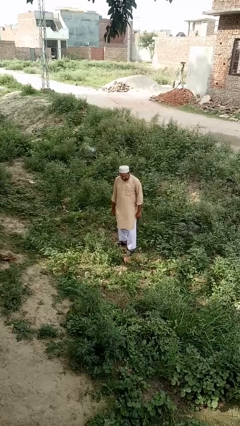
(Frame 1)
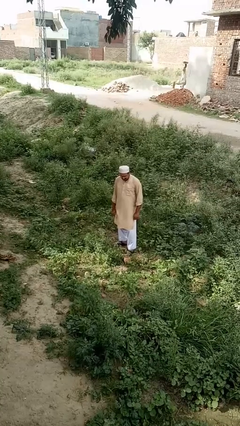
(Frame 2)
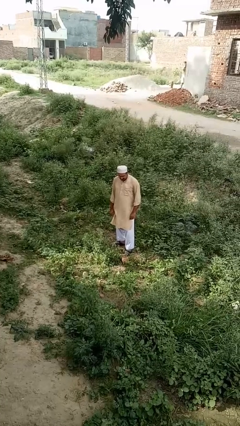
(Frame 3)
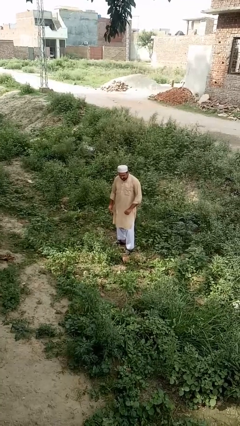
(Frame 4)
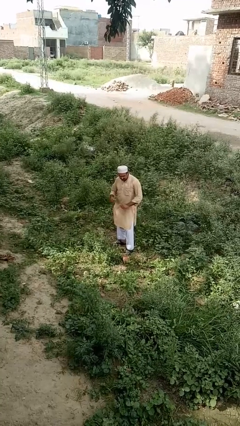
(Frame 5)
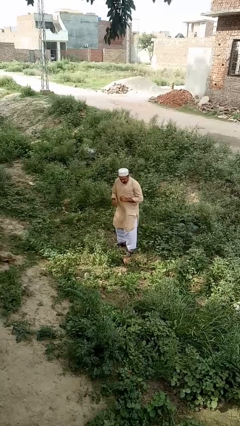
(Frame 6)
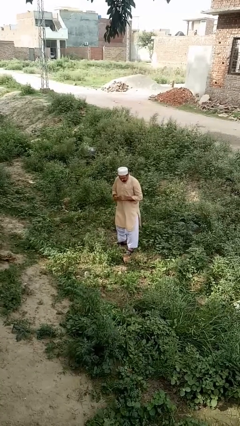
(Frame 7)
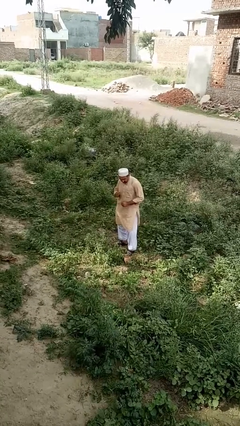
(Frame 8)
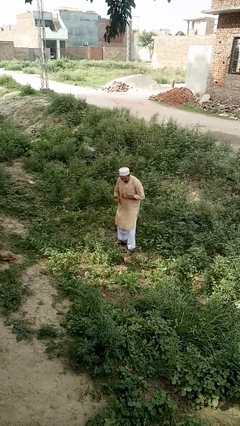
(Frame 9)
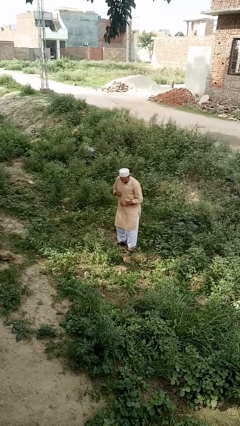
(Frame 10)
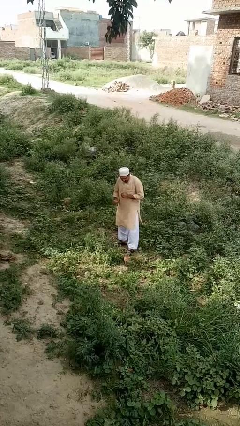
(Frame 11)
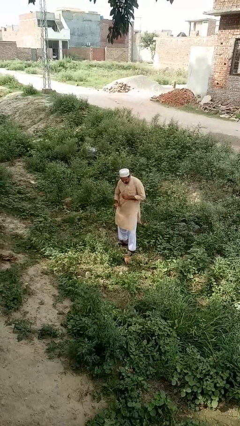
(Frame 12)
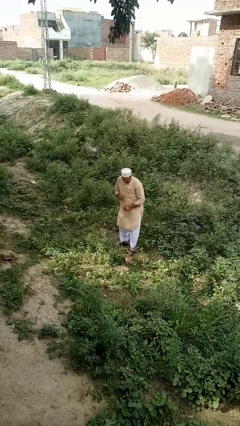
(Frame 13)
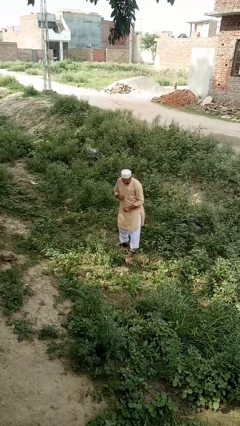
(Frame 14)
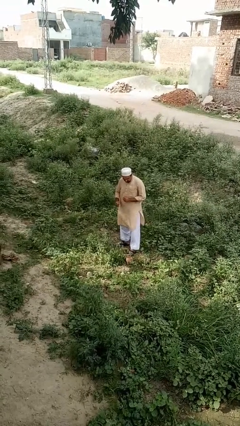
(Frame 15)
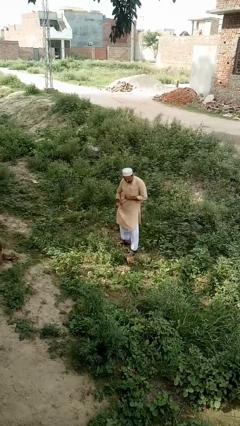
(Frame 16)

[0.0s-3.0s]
person dances in place

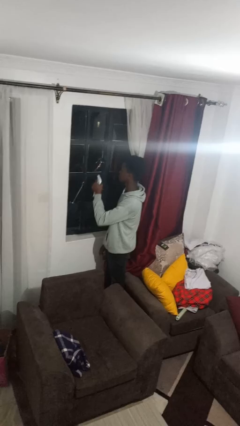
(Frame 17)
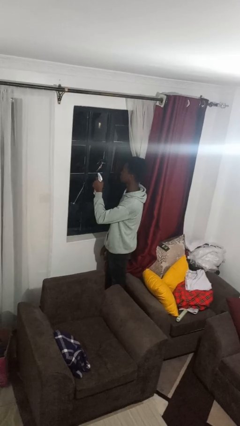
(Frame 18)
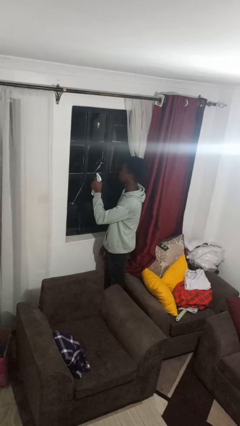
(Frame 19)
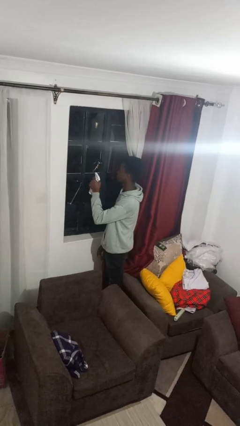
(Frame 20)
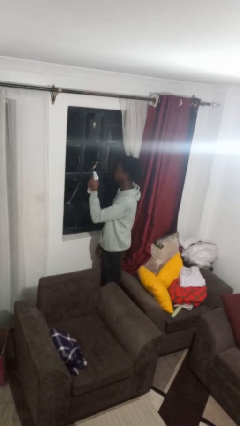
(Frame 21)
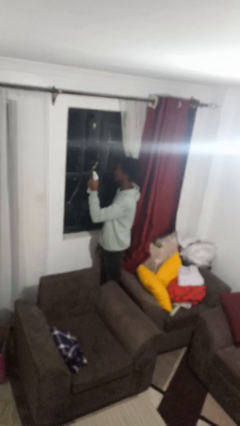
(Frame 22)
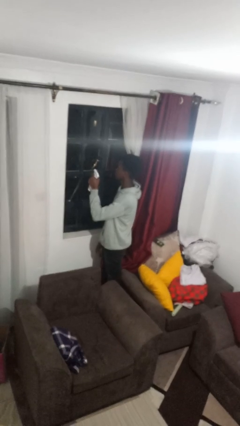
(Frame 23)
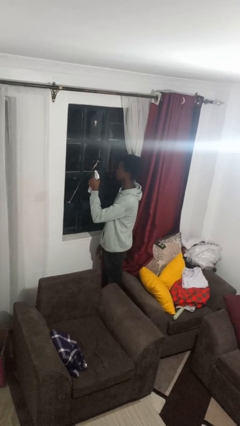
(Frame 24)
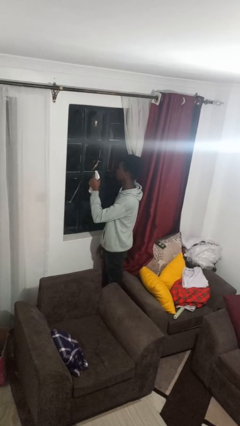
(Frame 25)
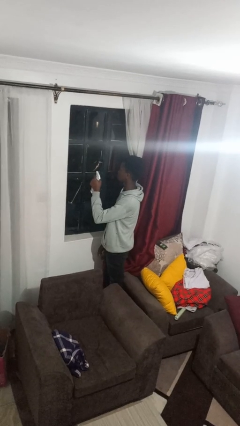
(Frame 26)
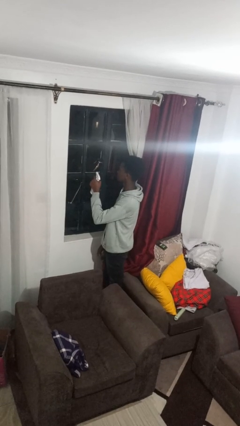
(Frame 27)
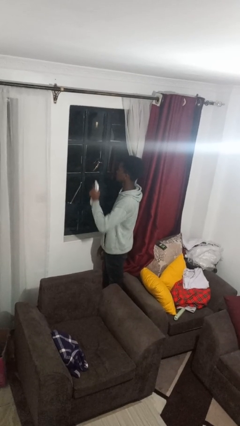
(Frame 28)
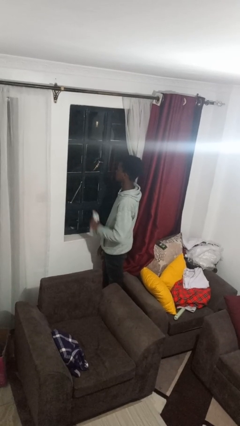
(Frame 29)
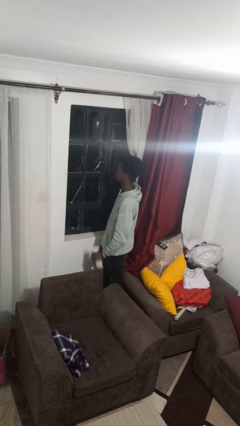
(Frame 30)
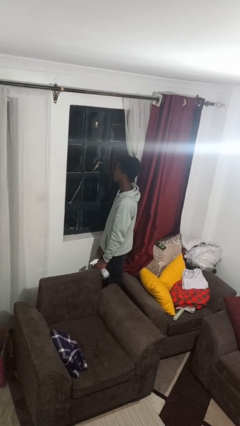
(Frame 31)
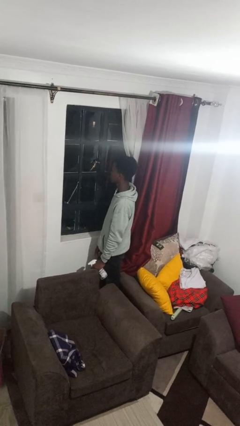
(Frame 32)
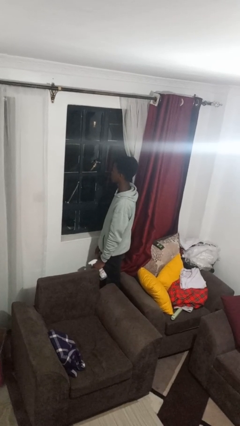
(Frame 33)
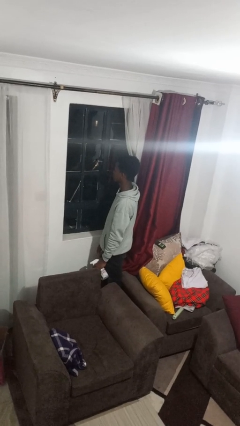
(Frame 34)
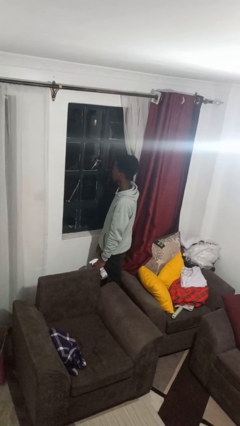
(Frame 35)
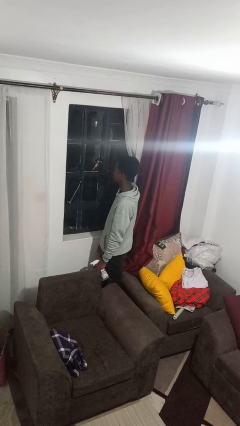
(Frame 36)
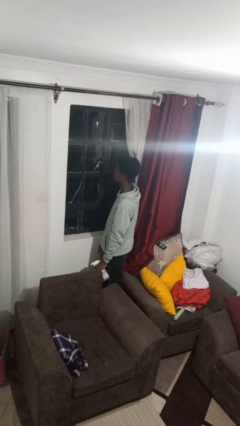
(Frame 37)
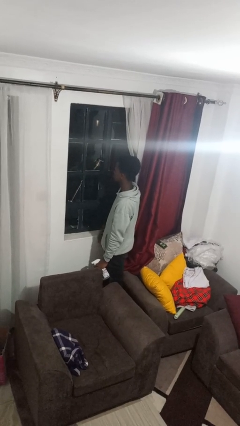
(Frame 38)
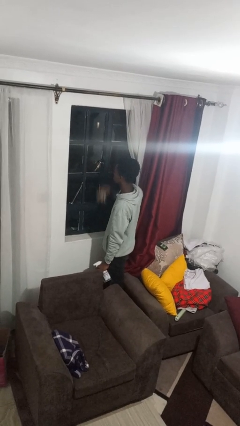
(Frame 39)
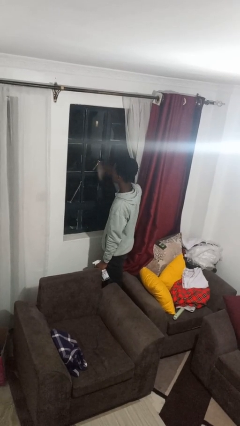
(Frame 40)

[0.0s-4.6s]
person sprays from bottle

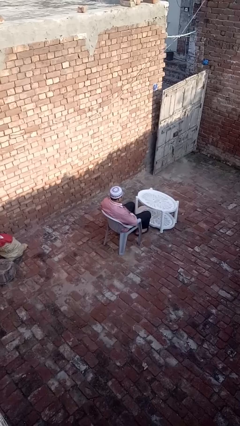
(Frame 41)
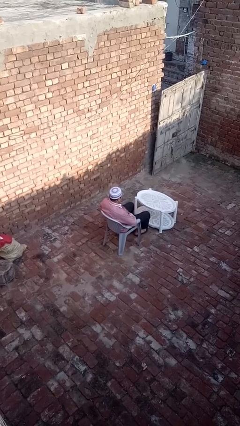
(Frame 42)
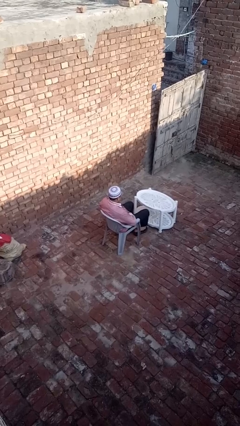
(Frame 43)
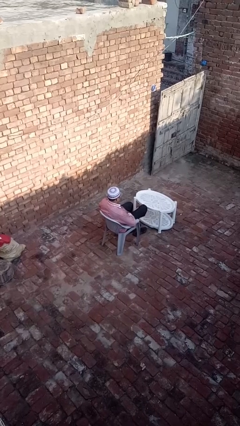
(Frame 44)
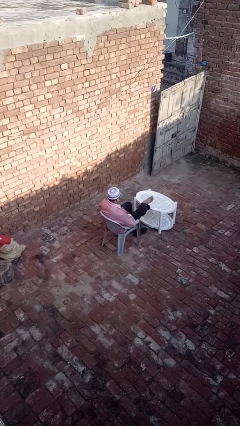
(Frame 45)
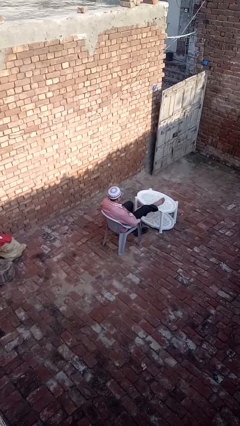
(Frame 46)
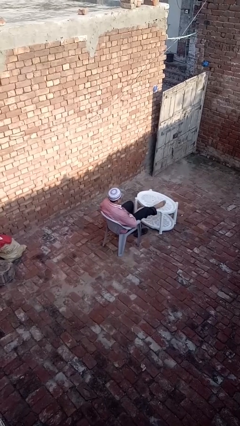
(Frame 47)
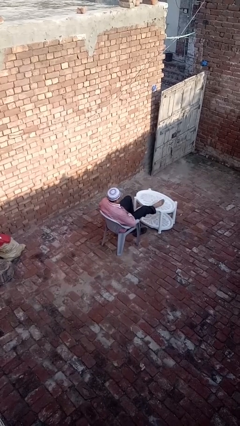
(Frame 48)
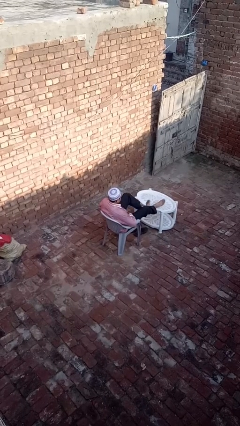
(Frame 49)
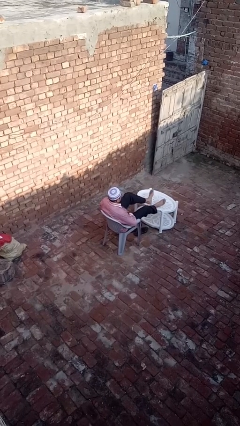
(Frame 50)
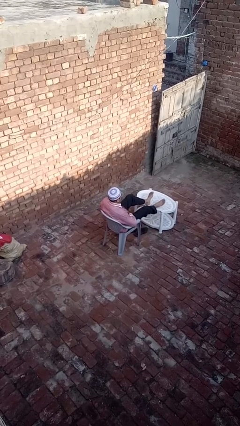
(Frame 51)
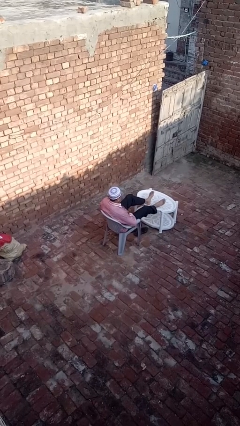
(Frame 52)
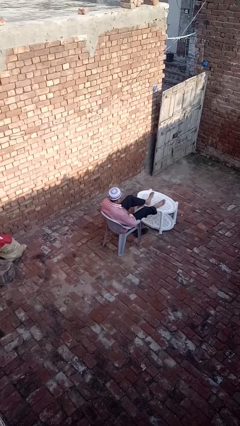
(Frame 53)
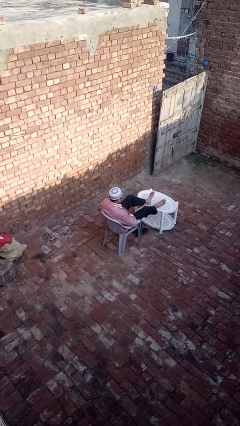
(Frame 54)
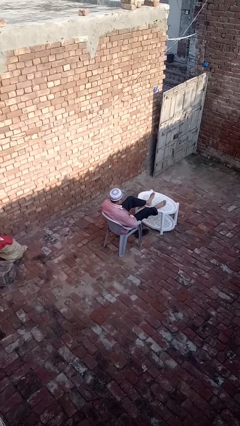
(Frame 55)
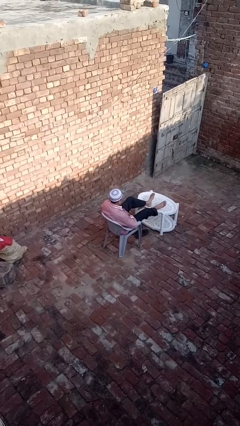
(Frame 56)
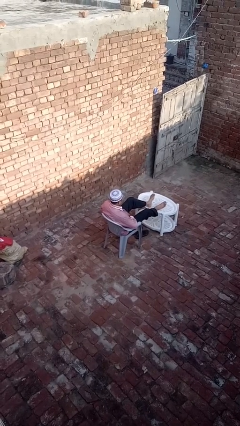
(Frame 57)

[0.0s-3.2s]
person puts feet up

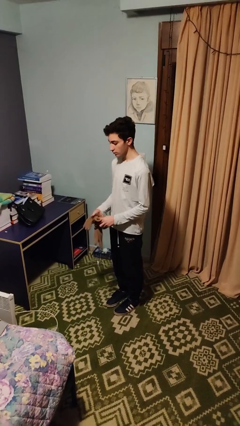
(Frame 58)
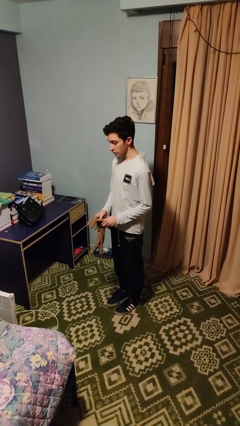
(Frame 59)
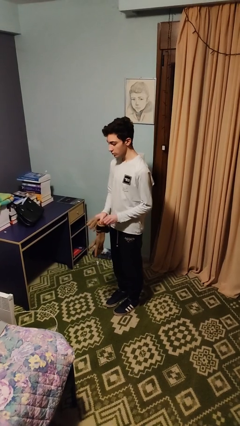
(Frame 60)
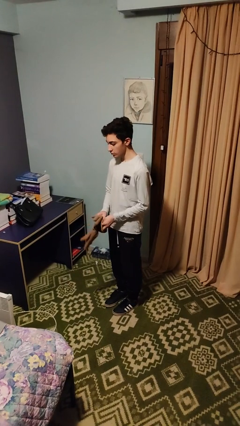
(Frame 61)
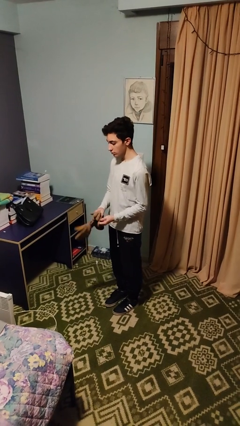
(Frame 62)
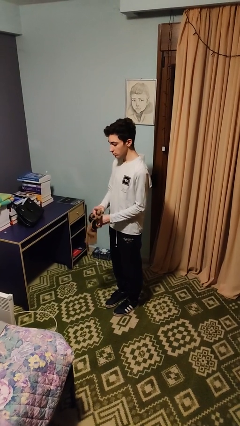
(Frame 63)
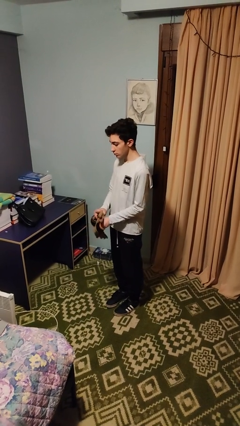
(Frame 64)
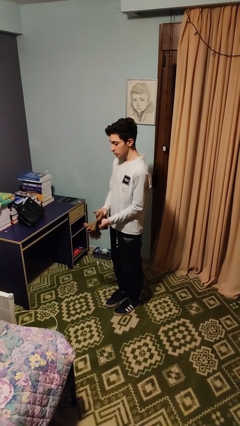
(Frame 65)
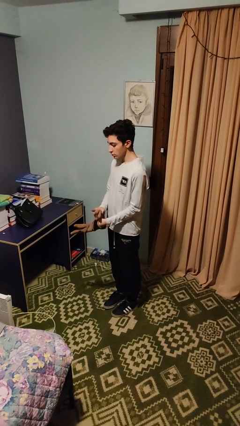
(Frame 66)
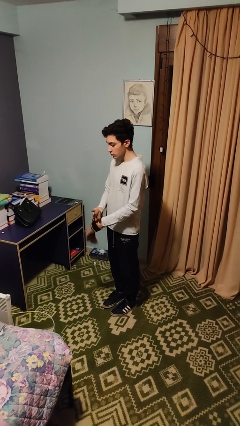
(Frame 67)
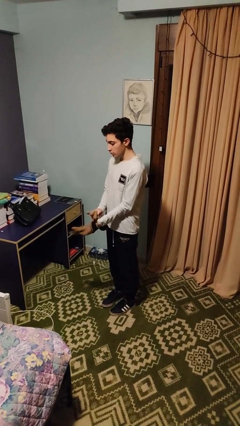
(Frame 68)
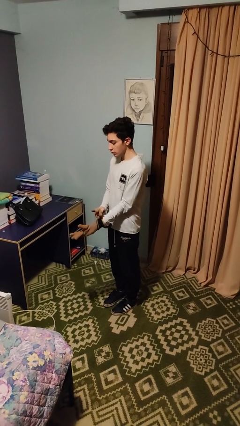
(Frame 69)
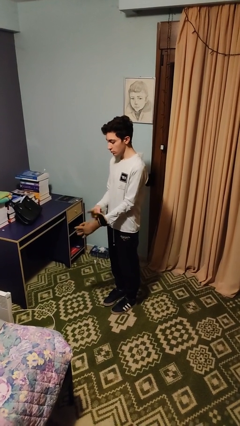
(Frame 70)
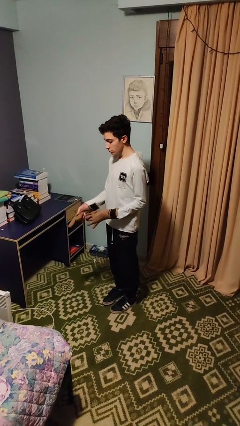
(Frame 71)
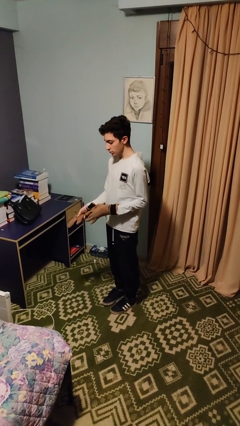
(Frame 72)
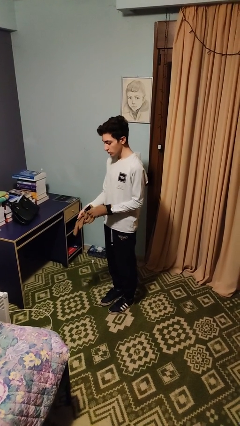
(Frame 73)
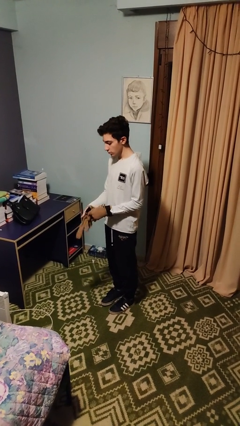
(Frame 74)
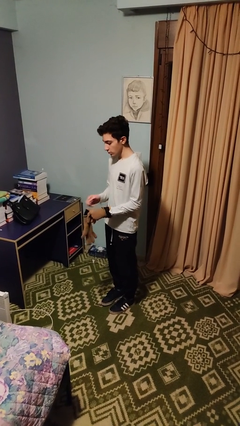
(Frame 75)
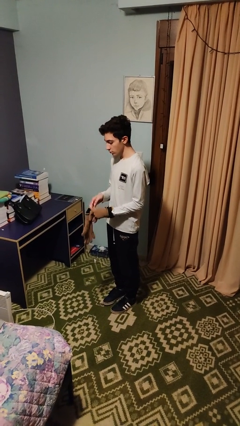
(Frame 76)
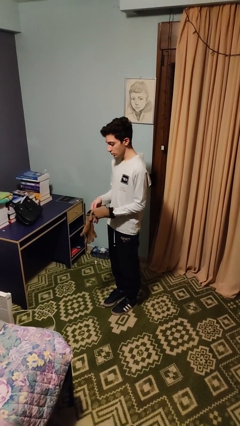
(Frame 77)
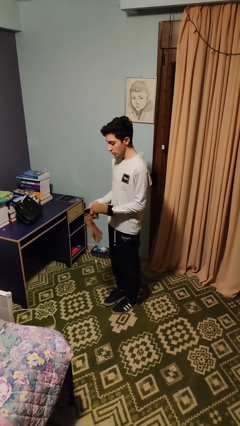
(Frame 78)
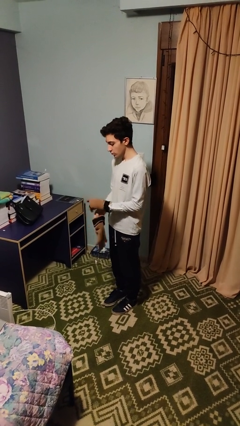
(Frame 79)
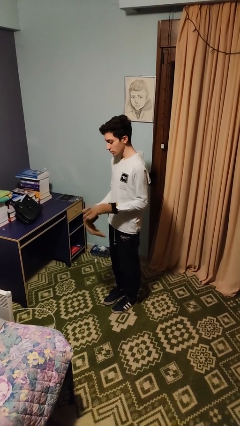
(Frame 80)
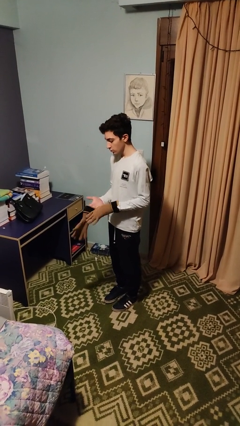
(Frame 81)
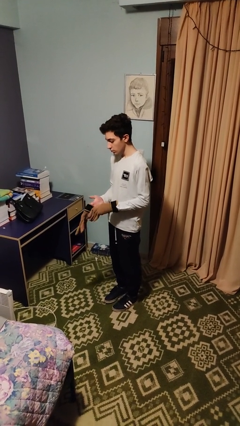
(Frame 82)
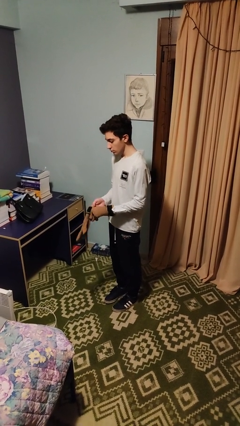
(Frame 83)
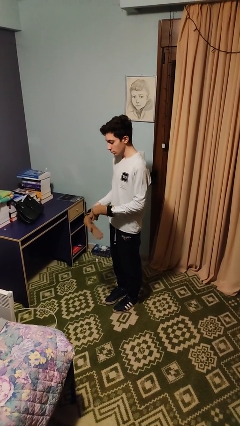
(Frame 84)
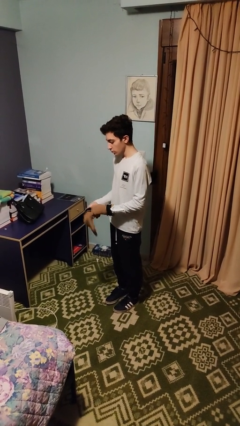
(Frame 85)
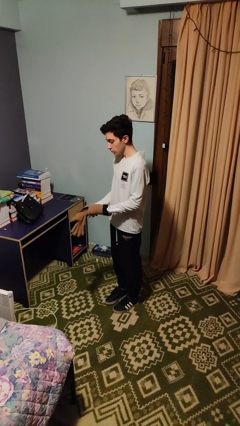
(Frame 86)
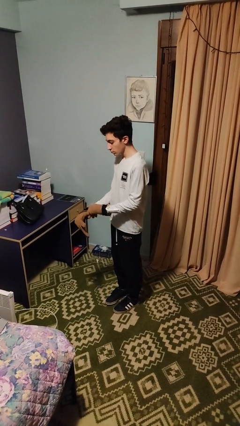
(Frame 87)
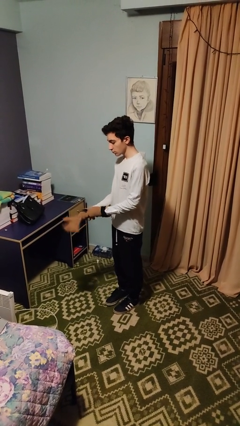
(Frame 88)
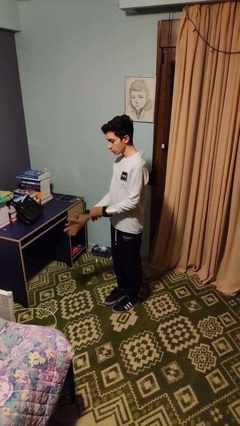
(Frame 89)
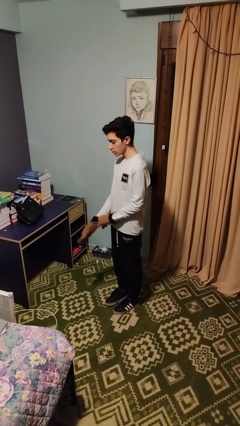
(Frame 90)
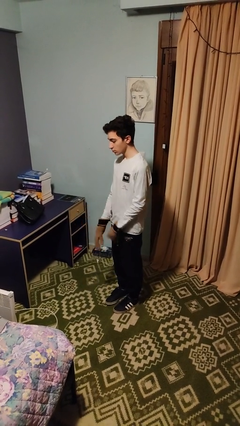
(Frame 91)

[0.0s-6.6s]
person puts on gloves

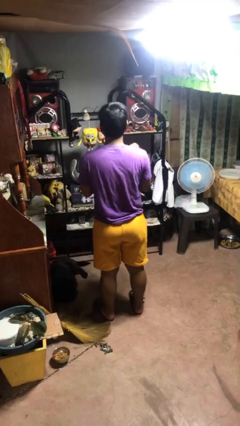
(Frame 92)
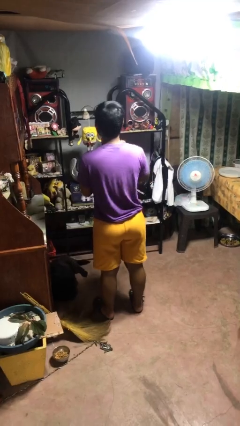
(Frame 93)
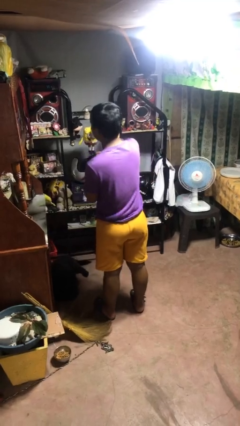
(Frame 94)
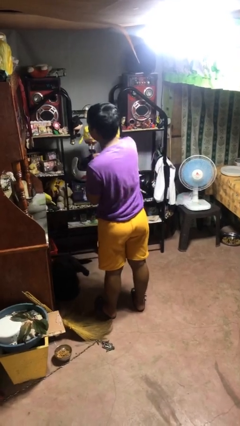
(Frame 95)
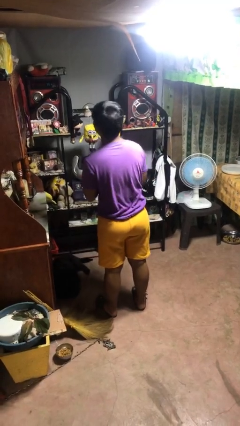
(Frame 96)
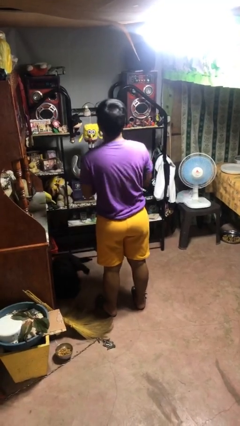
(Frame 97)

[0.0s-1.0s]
person punches
